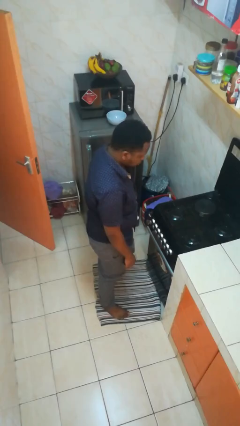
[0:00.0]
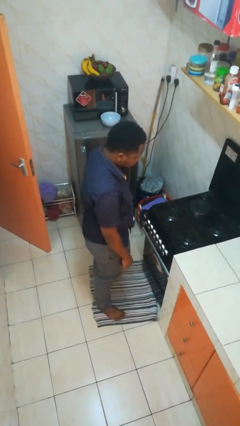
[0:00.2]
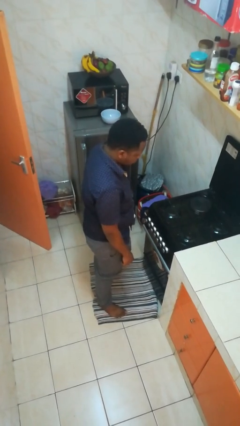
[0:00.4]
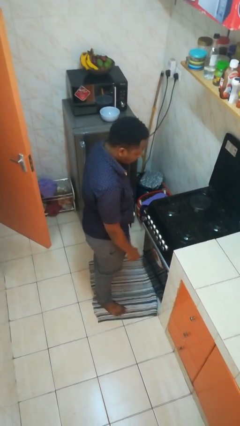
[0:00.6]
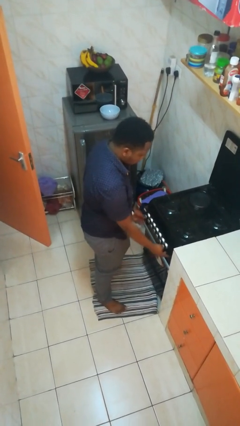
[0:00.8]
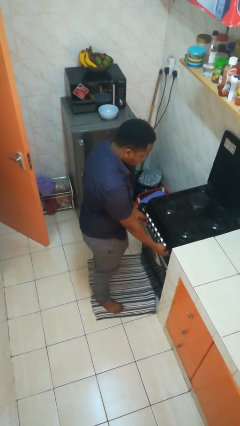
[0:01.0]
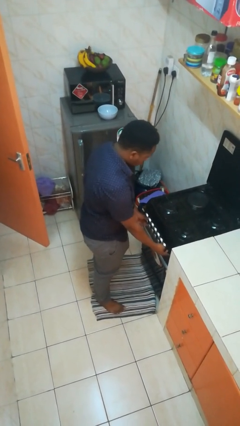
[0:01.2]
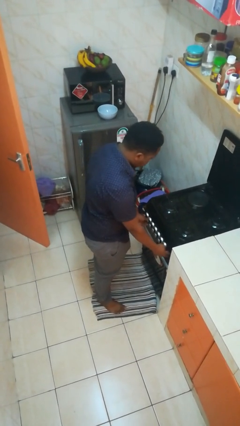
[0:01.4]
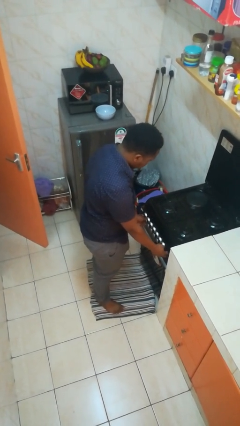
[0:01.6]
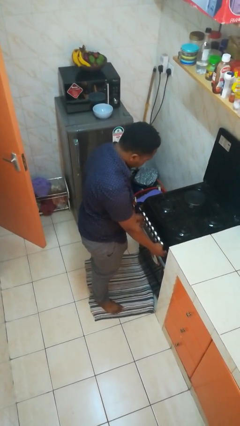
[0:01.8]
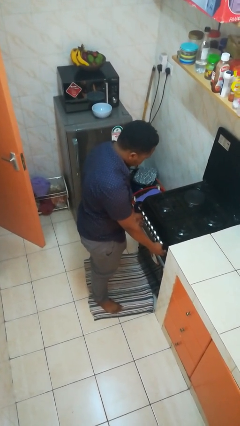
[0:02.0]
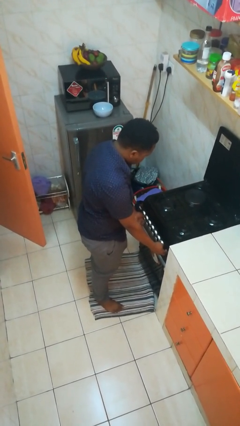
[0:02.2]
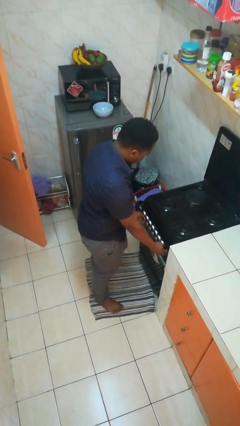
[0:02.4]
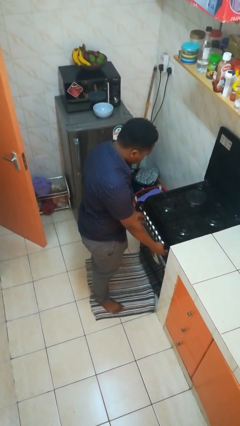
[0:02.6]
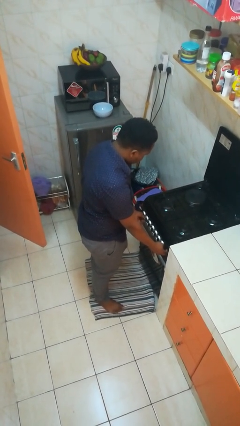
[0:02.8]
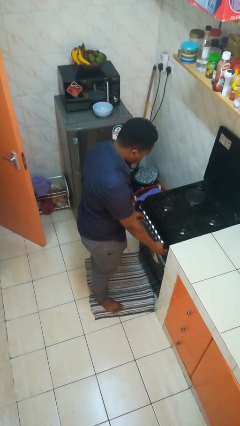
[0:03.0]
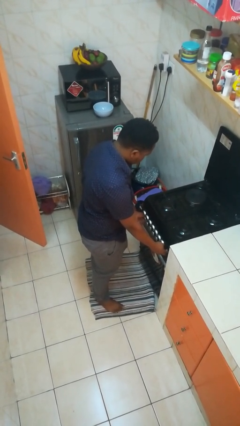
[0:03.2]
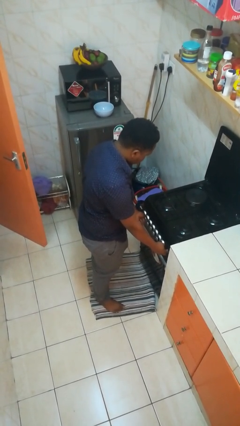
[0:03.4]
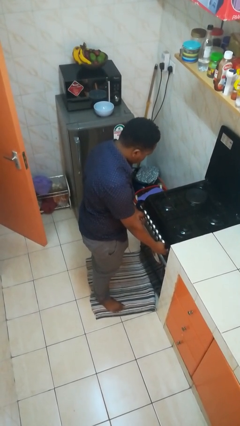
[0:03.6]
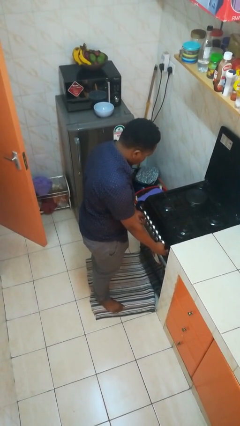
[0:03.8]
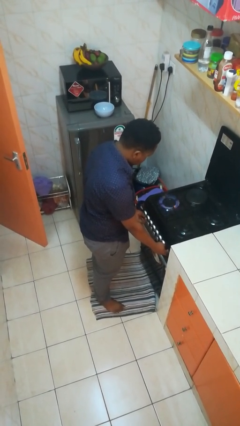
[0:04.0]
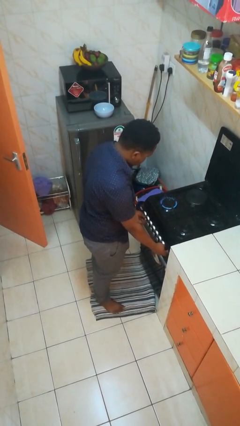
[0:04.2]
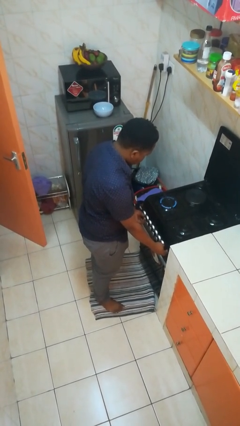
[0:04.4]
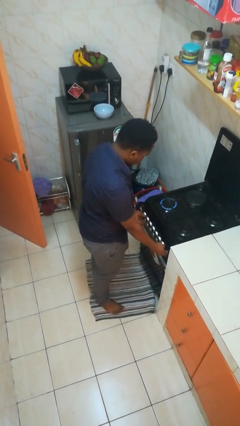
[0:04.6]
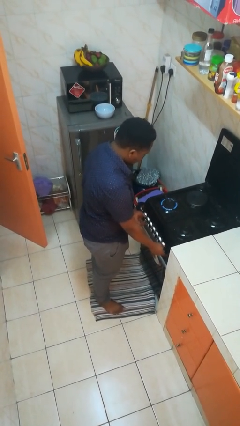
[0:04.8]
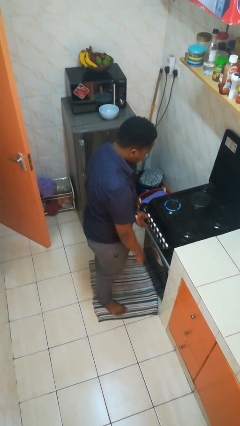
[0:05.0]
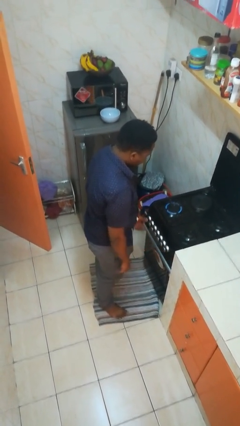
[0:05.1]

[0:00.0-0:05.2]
person turns on stovetop

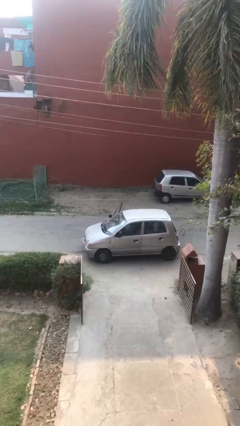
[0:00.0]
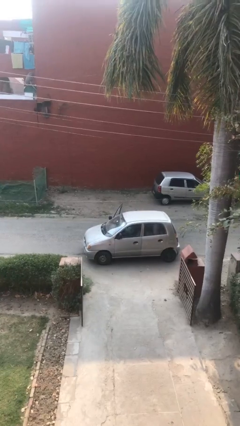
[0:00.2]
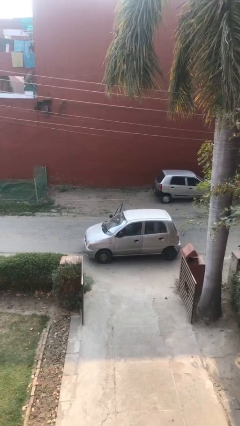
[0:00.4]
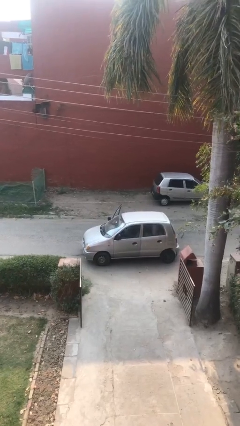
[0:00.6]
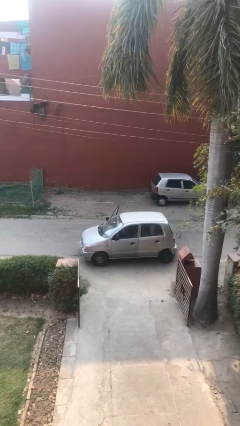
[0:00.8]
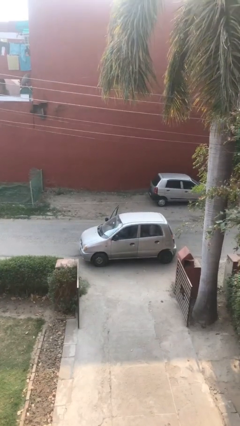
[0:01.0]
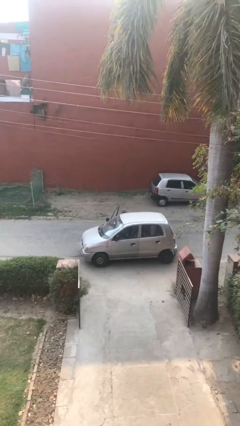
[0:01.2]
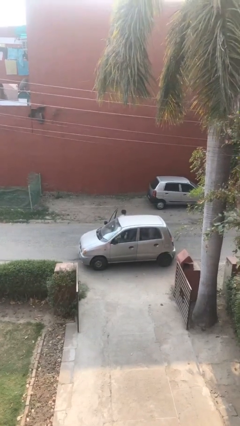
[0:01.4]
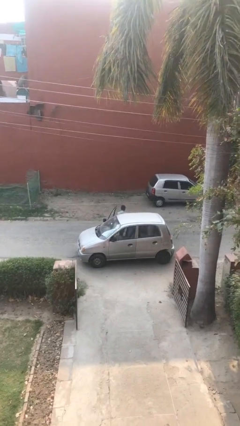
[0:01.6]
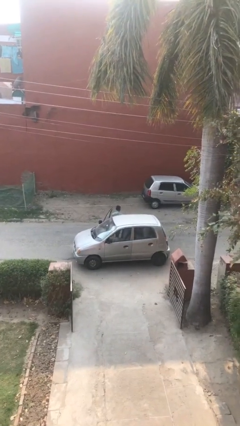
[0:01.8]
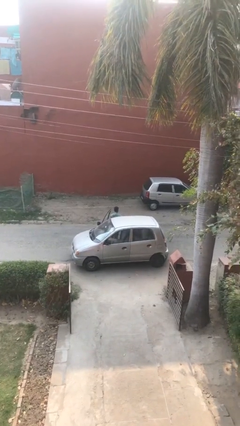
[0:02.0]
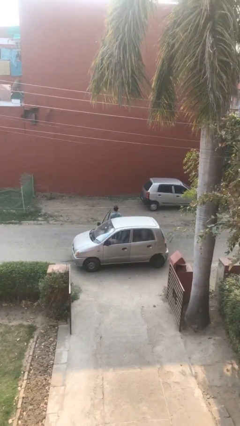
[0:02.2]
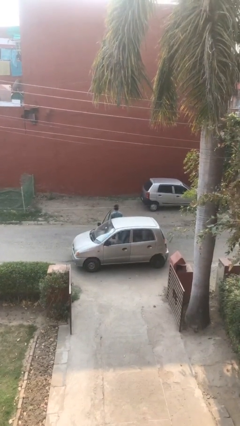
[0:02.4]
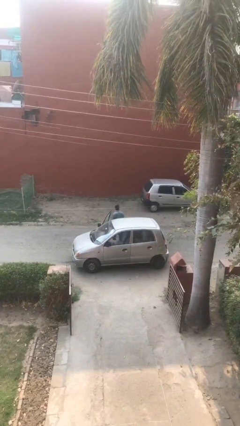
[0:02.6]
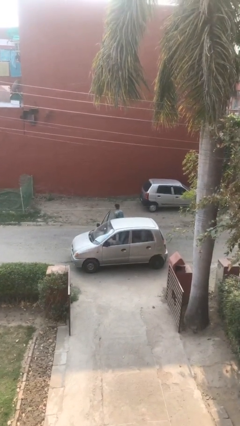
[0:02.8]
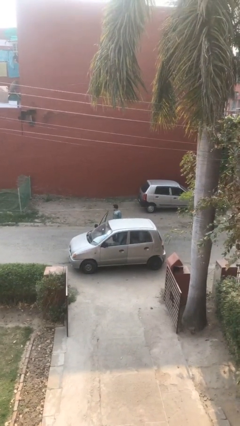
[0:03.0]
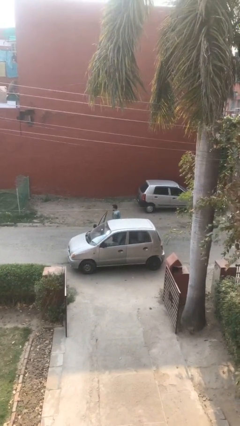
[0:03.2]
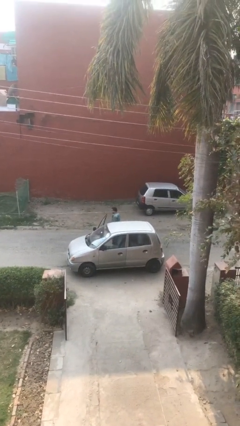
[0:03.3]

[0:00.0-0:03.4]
person exits car

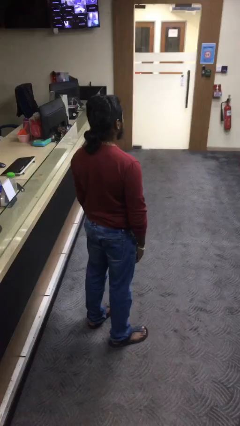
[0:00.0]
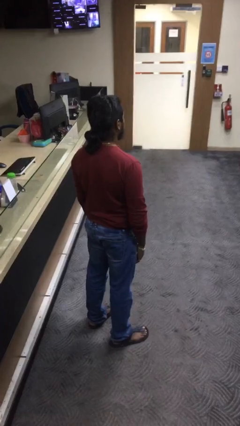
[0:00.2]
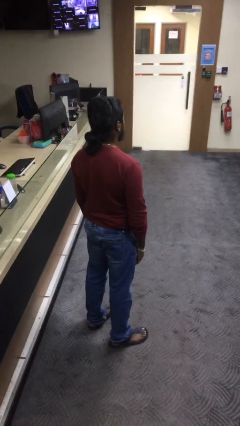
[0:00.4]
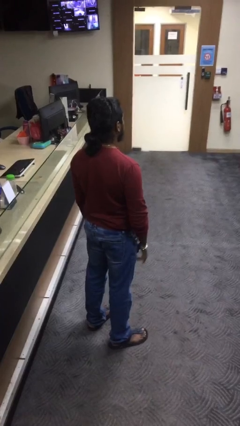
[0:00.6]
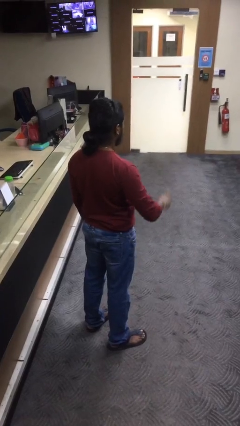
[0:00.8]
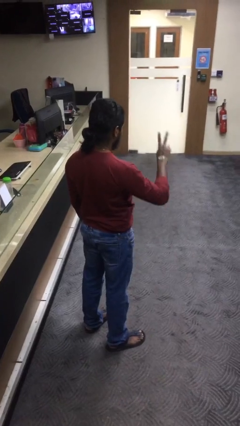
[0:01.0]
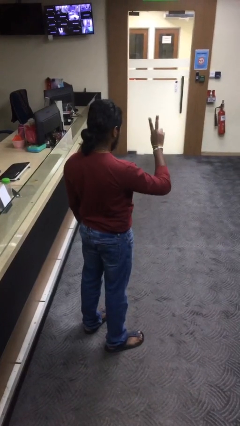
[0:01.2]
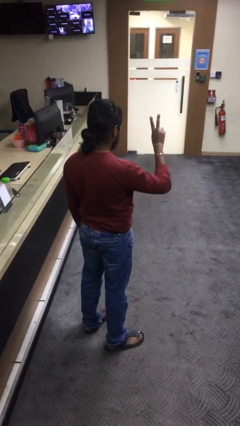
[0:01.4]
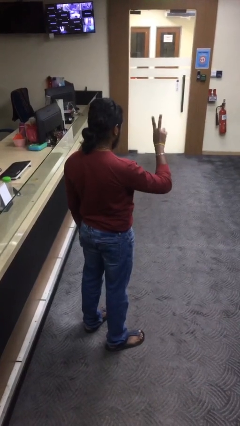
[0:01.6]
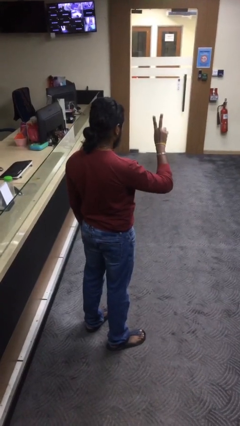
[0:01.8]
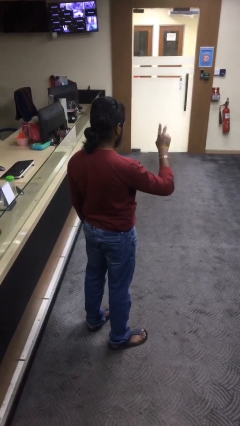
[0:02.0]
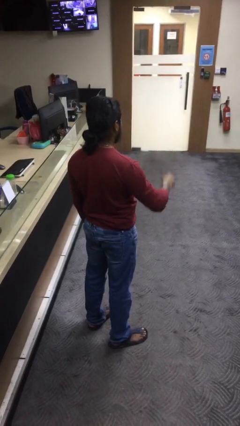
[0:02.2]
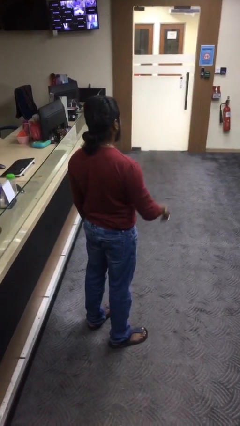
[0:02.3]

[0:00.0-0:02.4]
person gestures peace

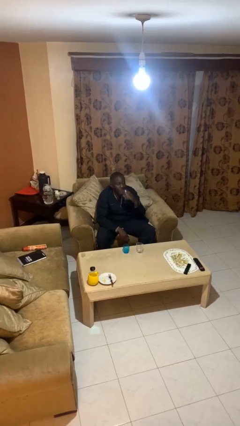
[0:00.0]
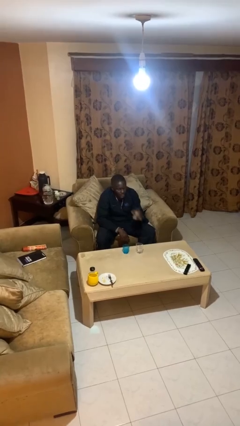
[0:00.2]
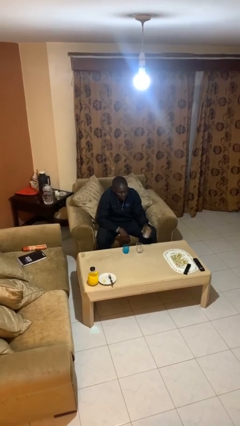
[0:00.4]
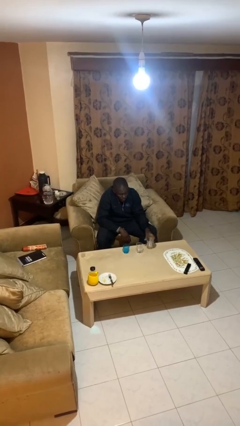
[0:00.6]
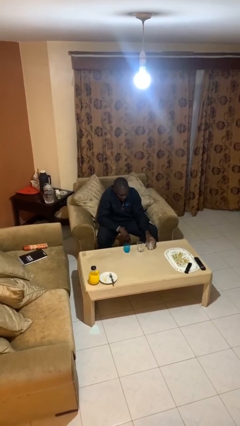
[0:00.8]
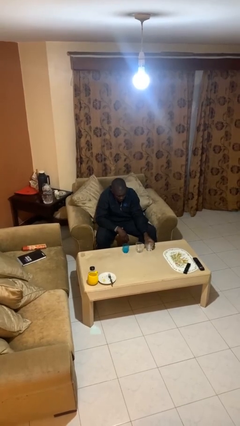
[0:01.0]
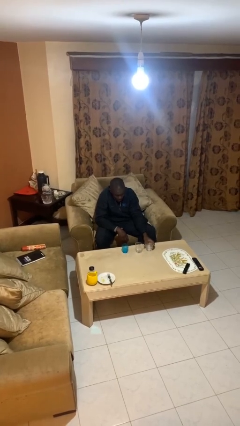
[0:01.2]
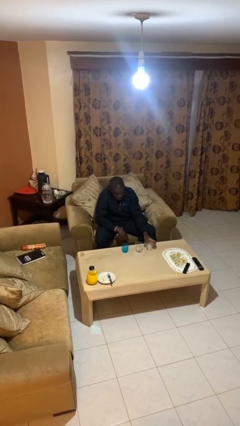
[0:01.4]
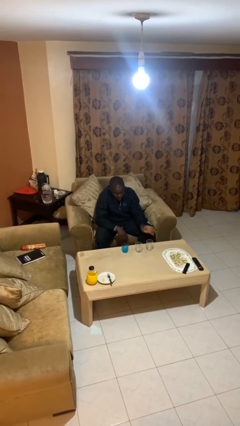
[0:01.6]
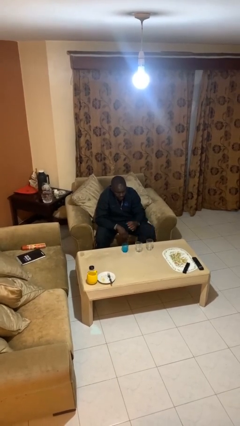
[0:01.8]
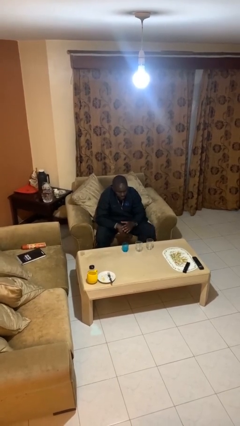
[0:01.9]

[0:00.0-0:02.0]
person puts down object on table

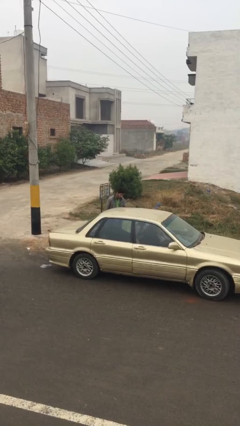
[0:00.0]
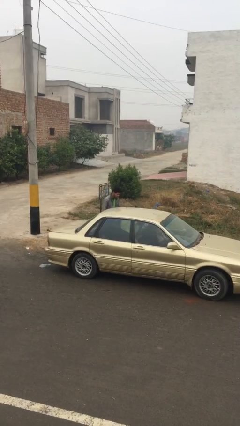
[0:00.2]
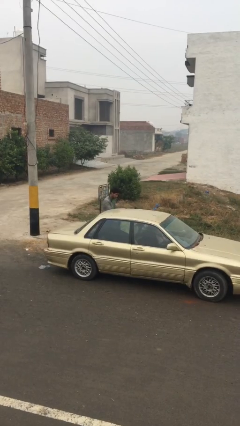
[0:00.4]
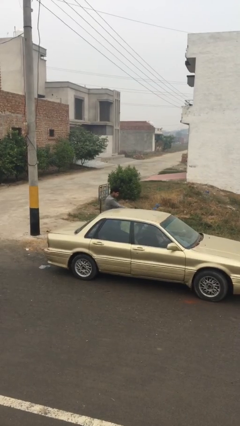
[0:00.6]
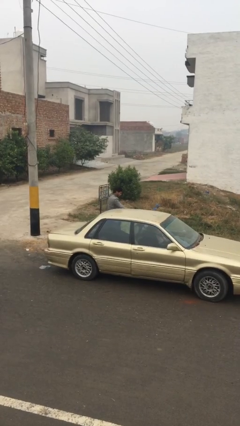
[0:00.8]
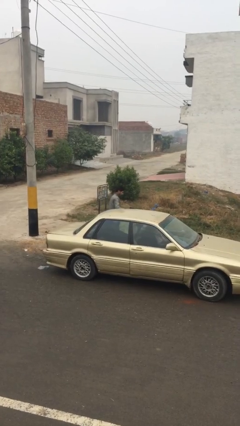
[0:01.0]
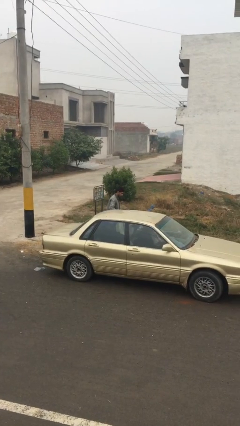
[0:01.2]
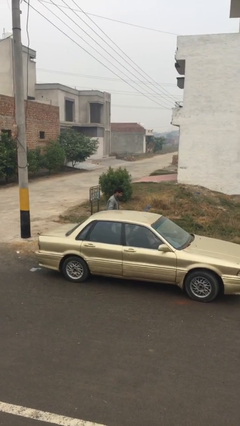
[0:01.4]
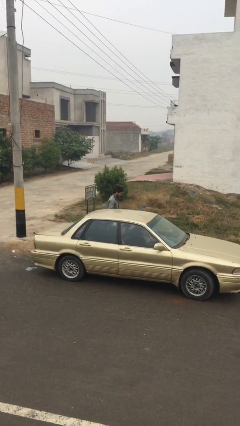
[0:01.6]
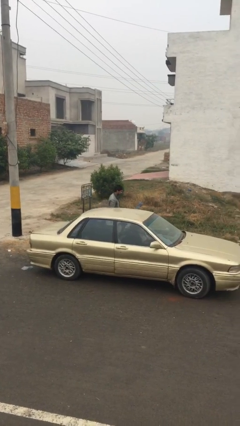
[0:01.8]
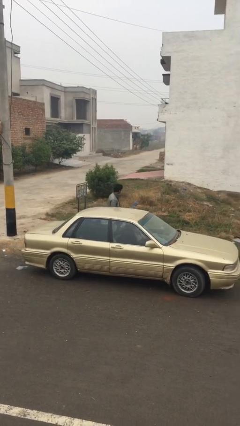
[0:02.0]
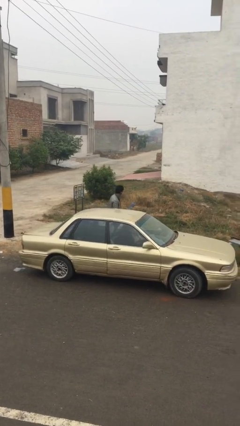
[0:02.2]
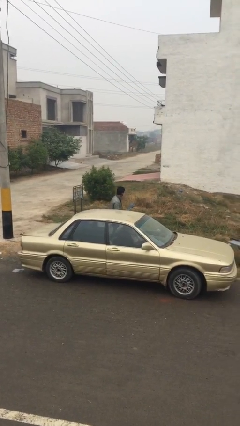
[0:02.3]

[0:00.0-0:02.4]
person closes car door

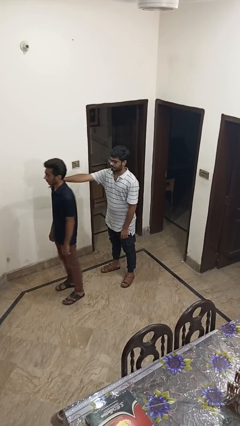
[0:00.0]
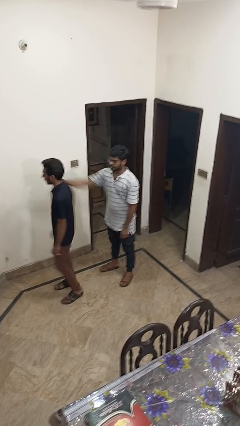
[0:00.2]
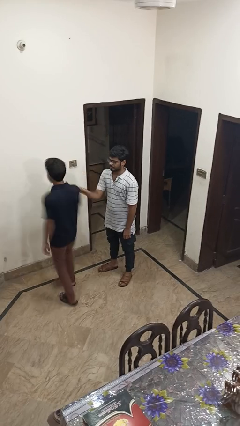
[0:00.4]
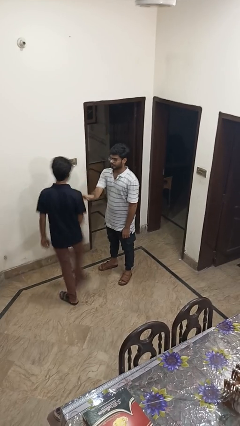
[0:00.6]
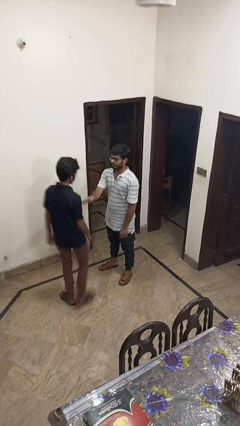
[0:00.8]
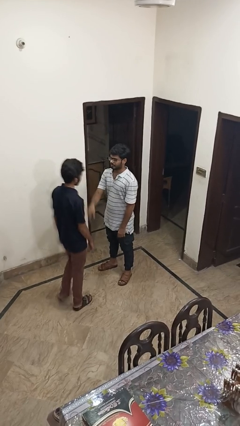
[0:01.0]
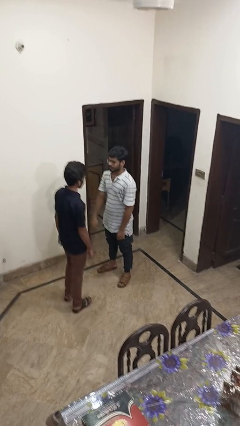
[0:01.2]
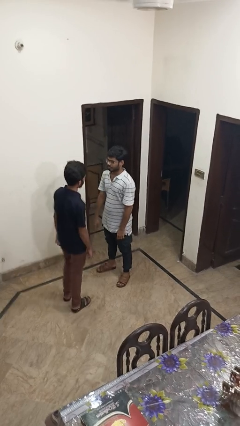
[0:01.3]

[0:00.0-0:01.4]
person spins person around

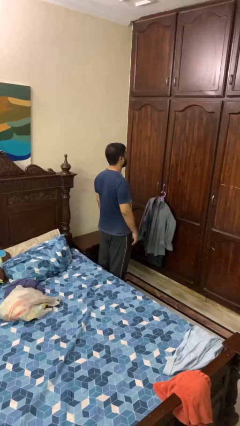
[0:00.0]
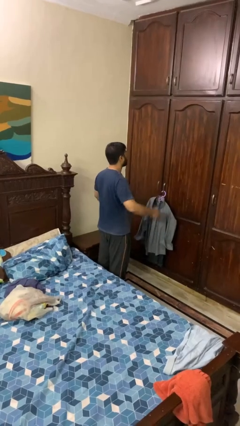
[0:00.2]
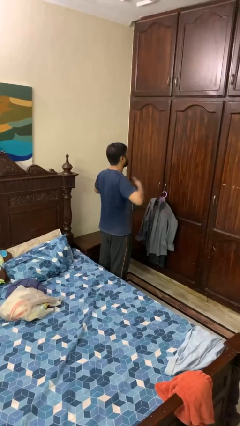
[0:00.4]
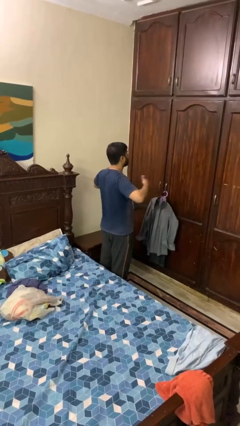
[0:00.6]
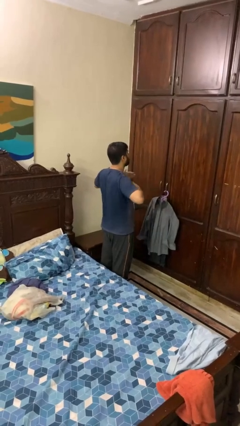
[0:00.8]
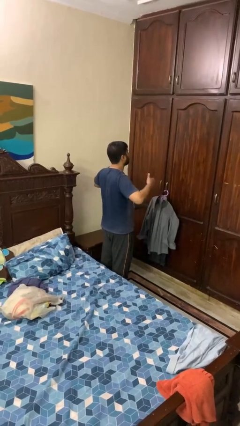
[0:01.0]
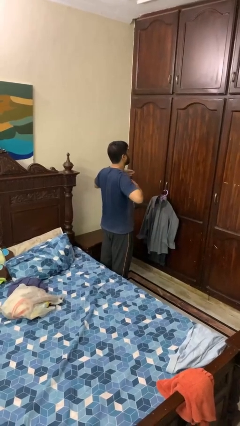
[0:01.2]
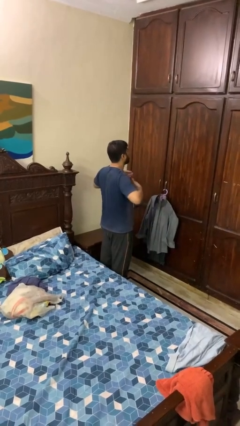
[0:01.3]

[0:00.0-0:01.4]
person drums on chest
